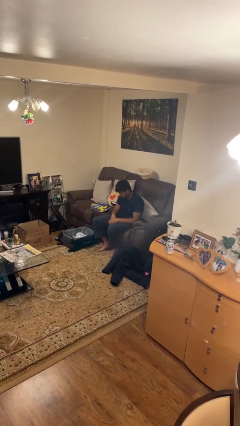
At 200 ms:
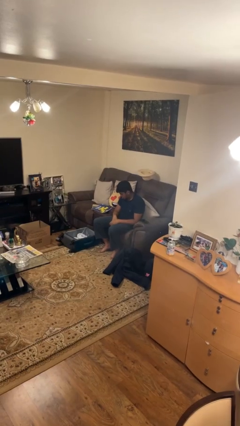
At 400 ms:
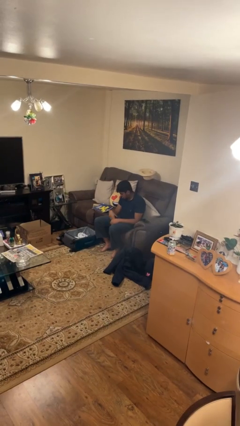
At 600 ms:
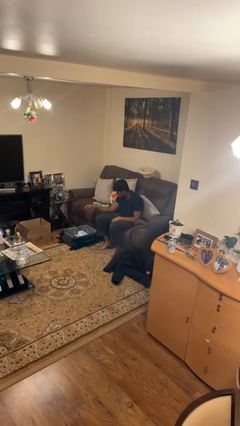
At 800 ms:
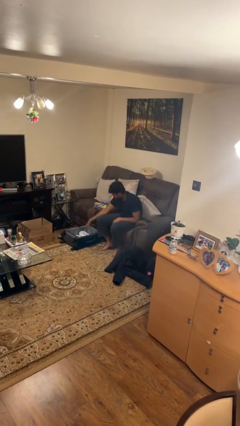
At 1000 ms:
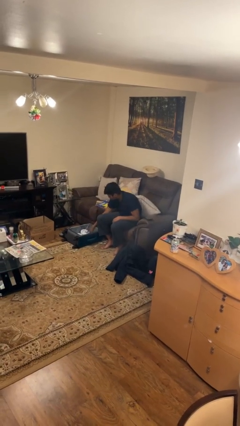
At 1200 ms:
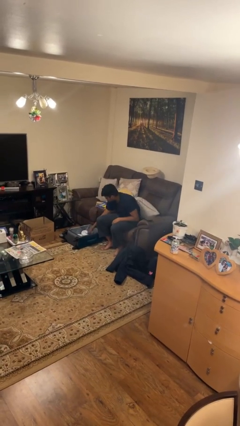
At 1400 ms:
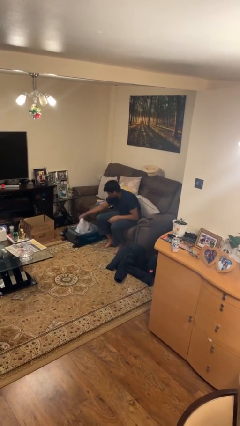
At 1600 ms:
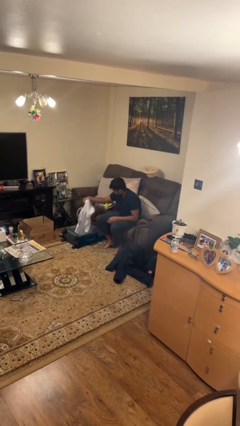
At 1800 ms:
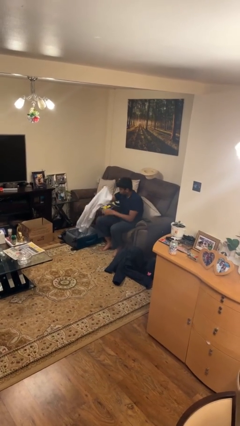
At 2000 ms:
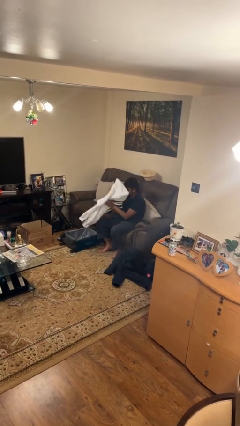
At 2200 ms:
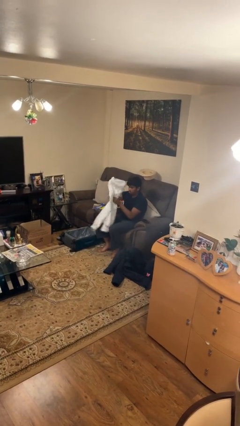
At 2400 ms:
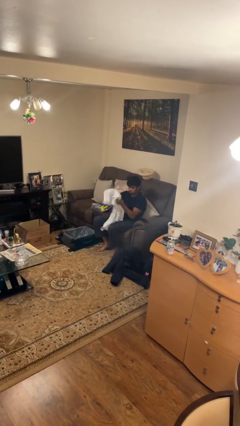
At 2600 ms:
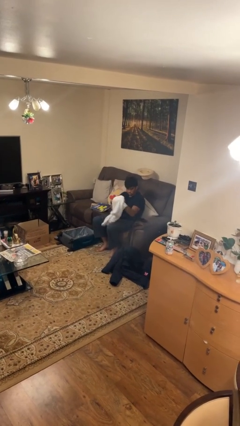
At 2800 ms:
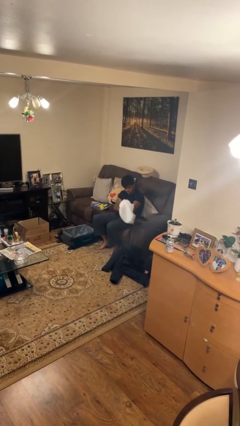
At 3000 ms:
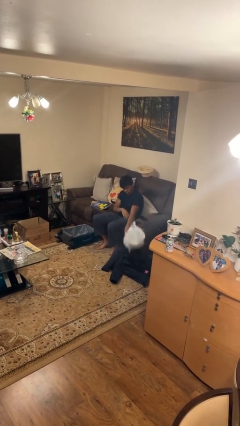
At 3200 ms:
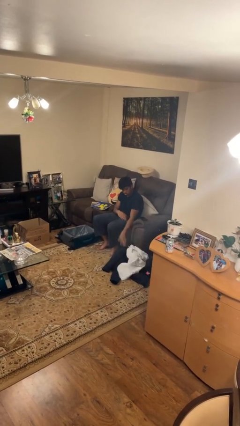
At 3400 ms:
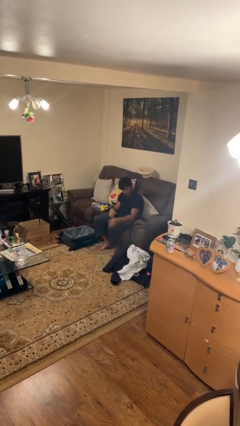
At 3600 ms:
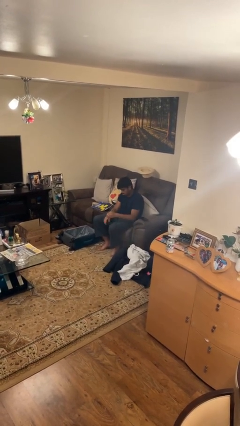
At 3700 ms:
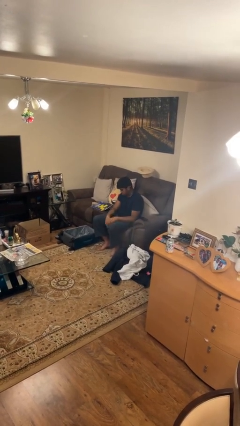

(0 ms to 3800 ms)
person unloads clothes from suitcase

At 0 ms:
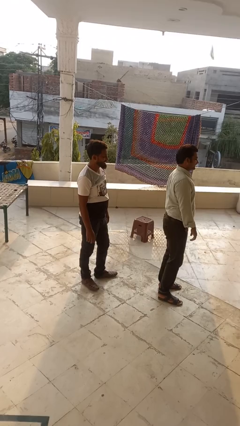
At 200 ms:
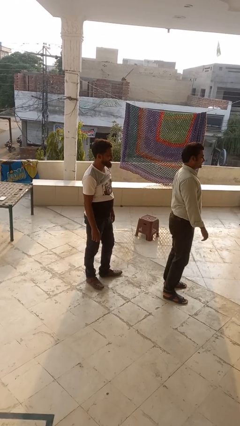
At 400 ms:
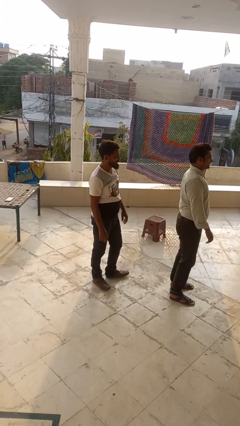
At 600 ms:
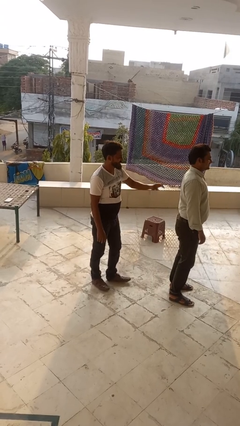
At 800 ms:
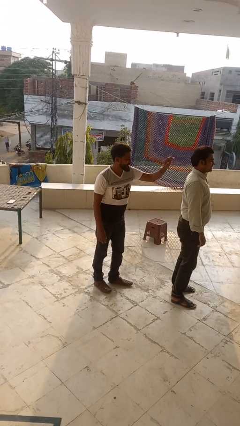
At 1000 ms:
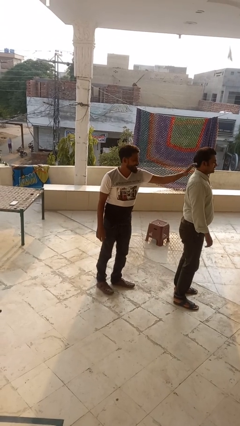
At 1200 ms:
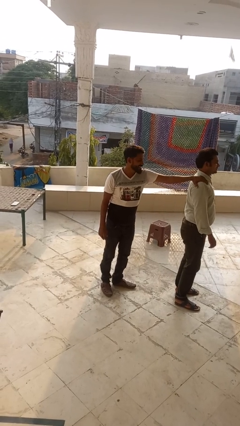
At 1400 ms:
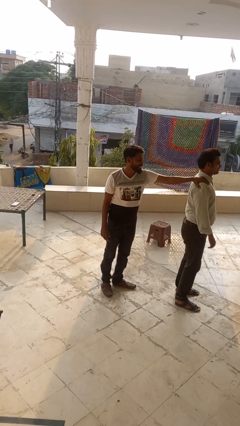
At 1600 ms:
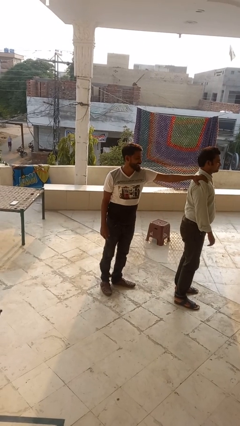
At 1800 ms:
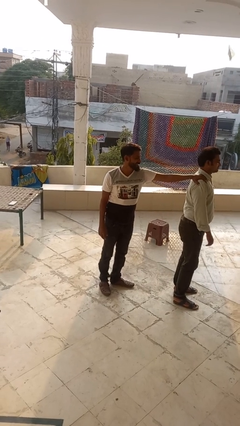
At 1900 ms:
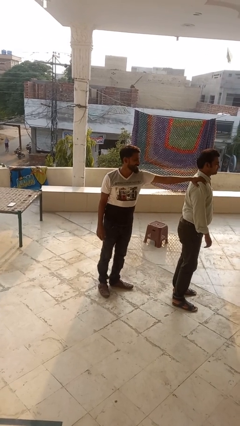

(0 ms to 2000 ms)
person grabs person by shoulder

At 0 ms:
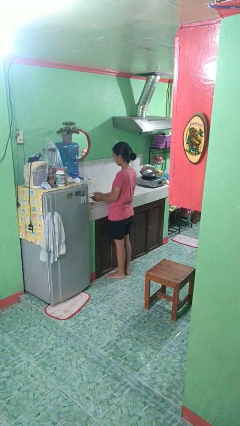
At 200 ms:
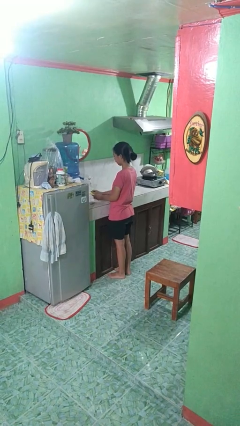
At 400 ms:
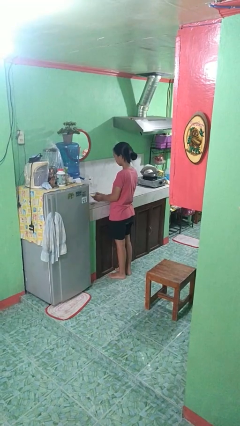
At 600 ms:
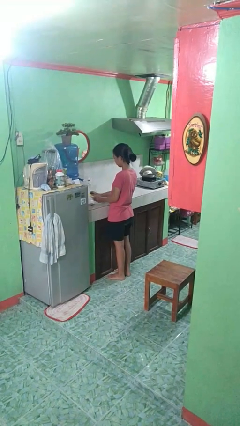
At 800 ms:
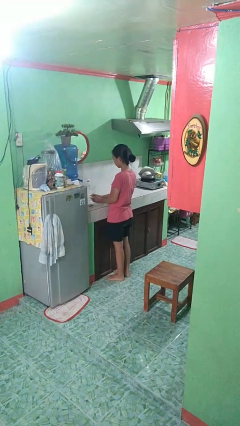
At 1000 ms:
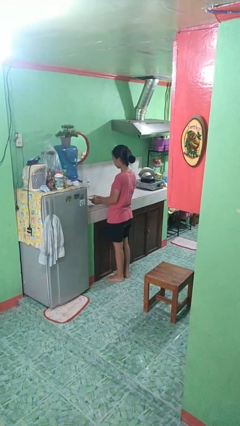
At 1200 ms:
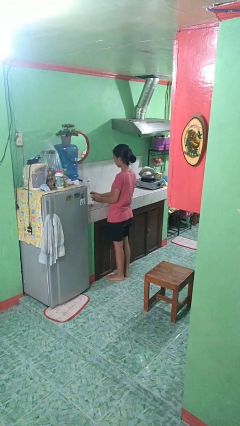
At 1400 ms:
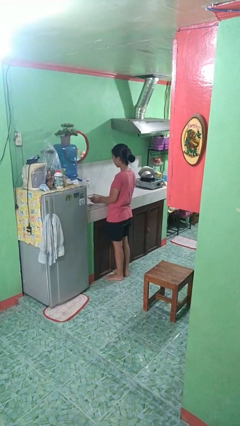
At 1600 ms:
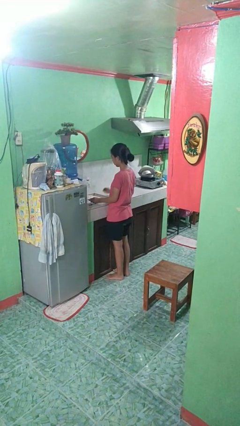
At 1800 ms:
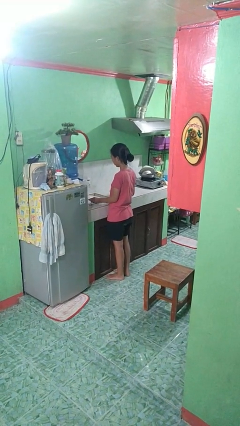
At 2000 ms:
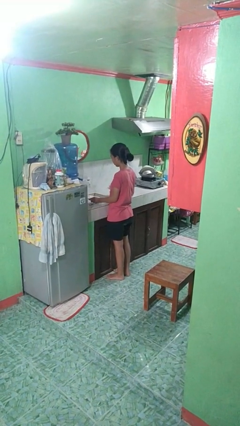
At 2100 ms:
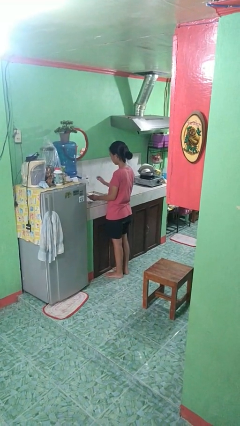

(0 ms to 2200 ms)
person washes dish

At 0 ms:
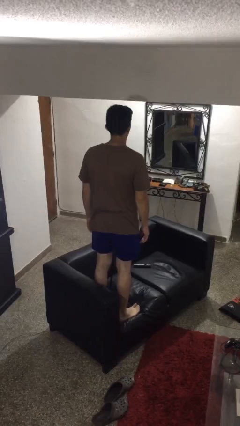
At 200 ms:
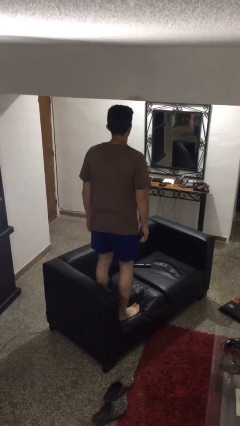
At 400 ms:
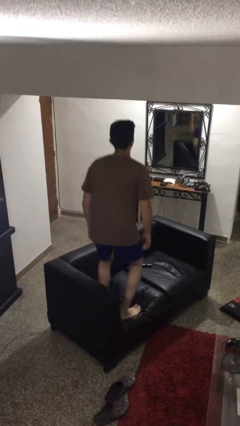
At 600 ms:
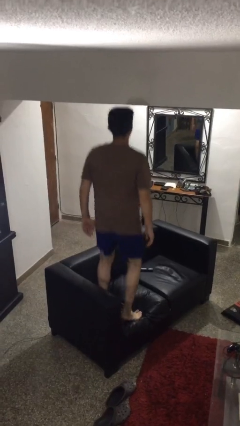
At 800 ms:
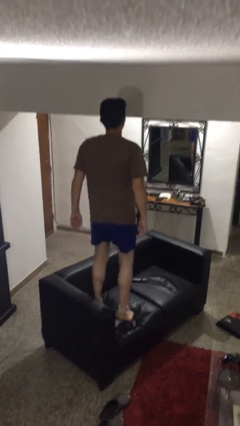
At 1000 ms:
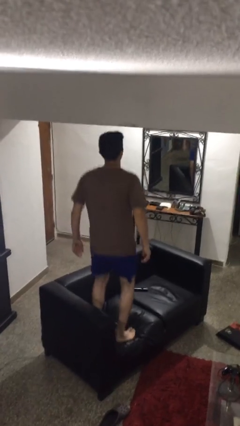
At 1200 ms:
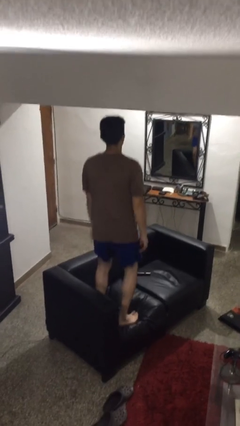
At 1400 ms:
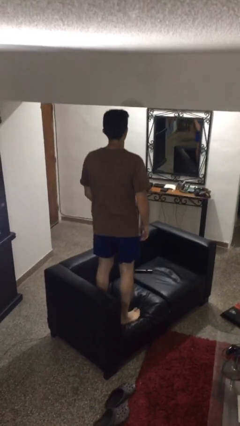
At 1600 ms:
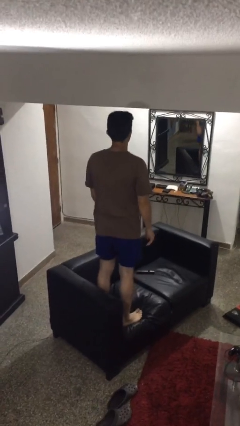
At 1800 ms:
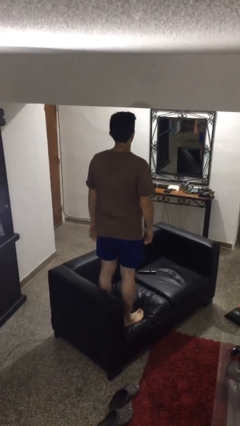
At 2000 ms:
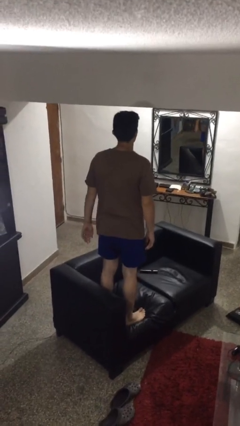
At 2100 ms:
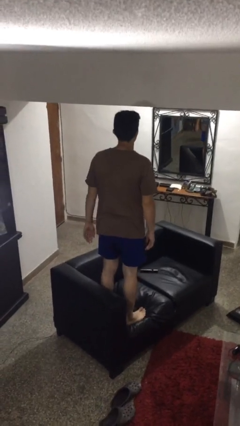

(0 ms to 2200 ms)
person jumps on couch

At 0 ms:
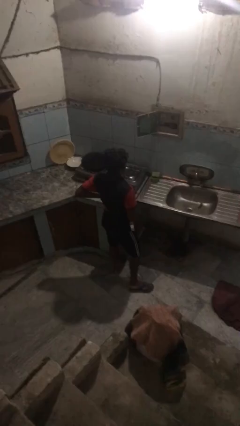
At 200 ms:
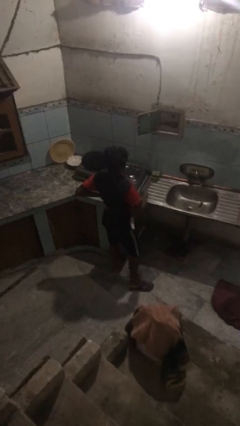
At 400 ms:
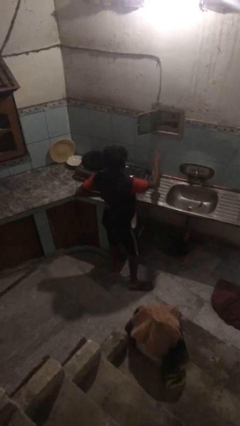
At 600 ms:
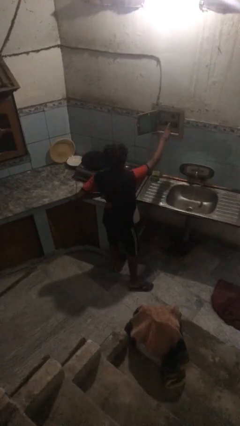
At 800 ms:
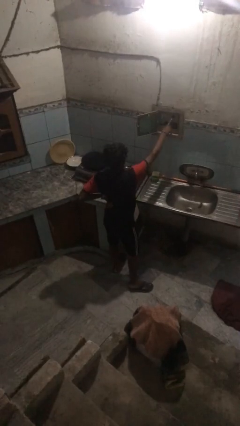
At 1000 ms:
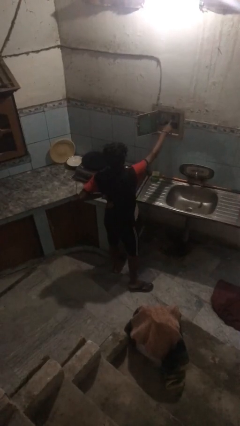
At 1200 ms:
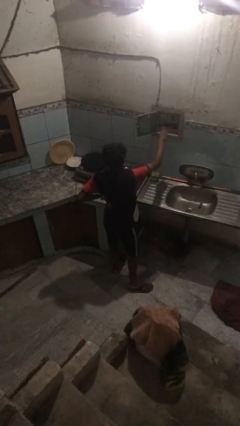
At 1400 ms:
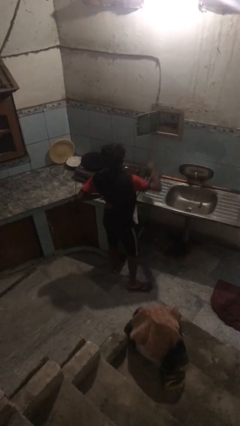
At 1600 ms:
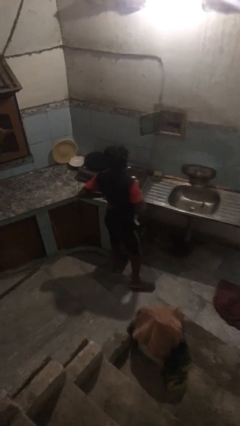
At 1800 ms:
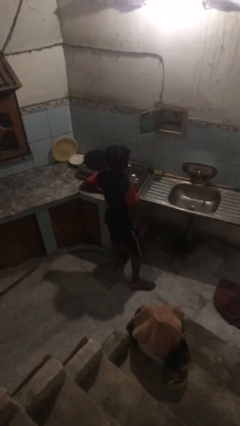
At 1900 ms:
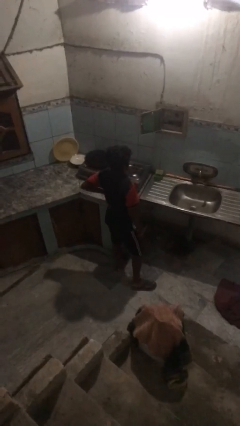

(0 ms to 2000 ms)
person takes down smoke detector

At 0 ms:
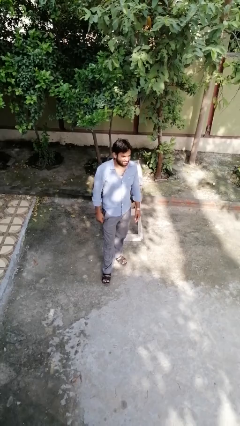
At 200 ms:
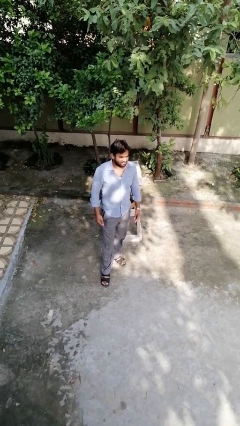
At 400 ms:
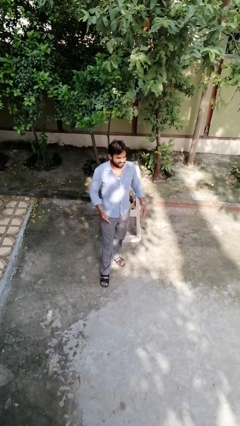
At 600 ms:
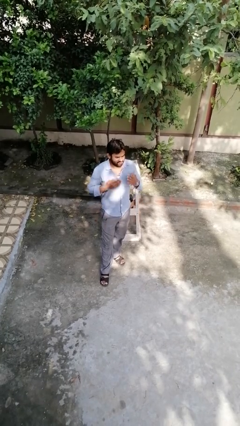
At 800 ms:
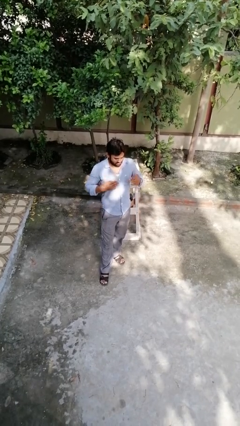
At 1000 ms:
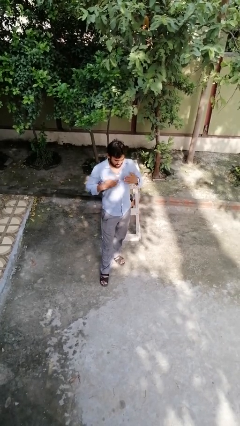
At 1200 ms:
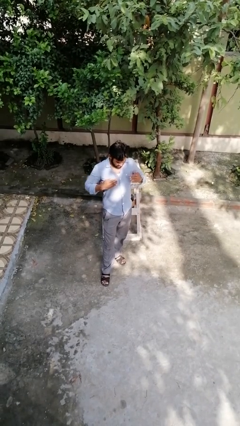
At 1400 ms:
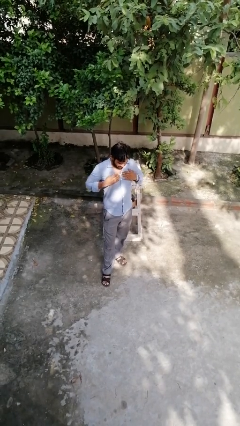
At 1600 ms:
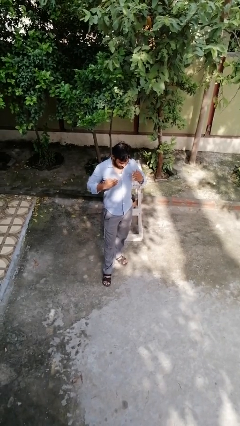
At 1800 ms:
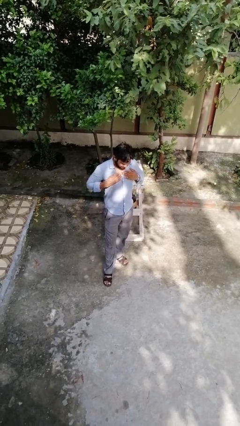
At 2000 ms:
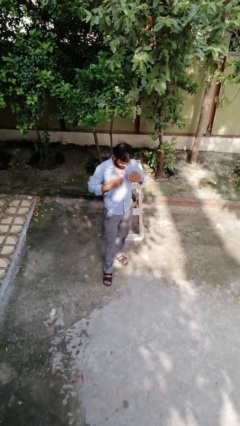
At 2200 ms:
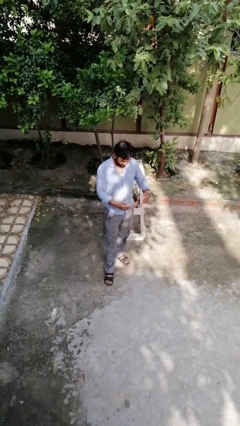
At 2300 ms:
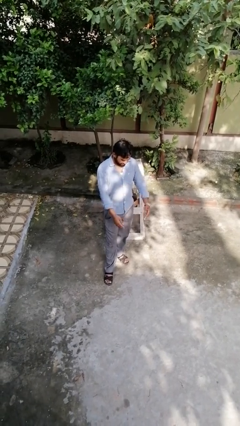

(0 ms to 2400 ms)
person drums on chest

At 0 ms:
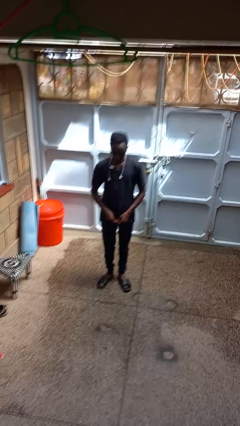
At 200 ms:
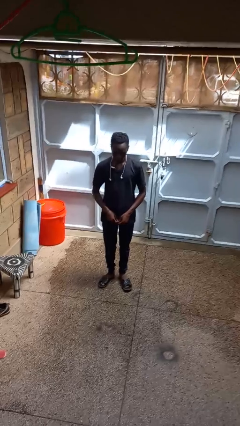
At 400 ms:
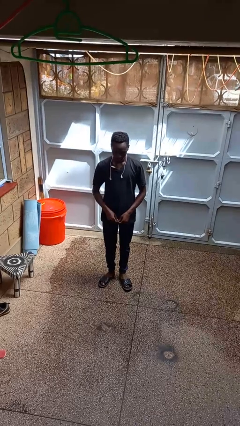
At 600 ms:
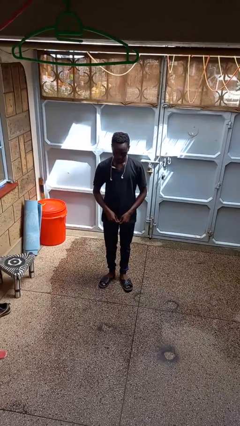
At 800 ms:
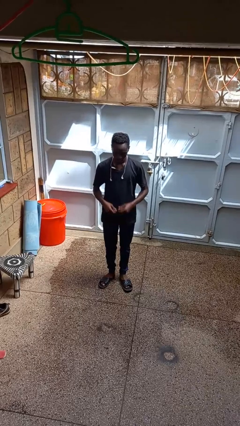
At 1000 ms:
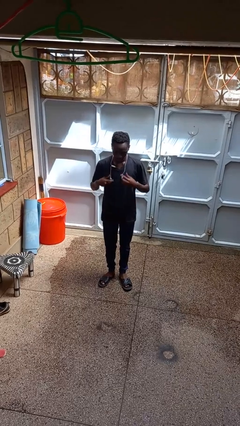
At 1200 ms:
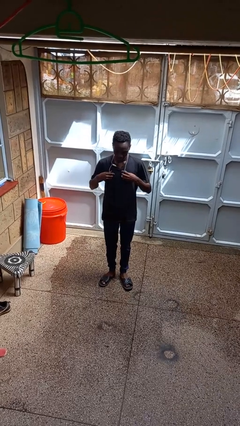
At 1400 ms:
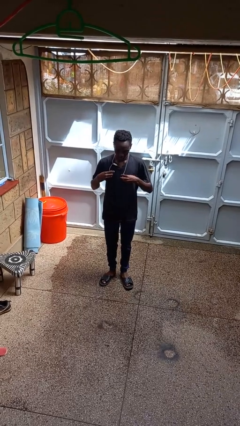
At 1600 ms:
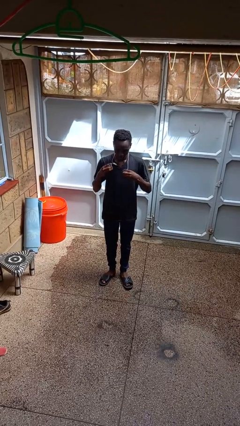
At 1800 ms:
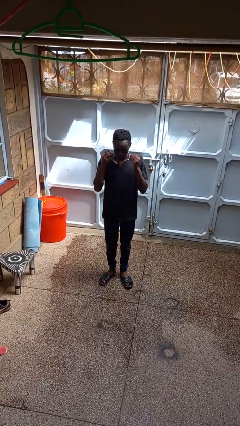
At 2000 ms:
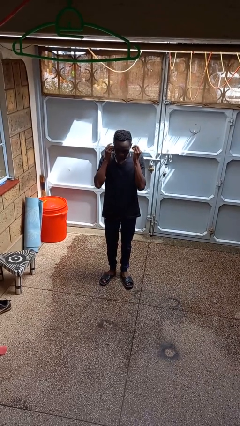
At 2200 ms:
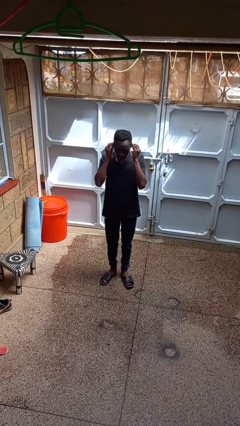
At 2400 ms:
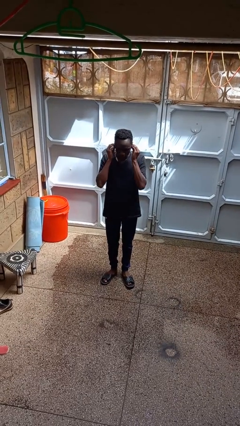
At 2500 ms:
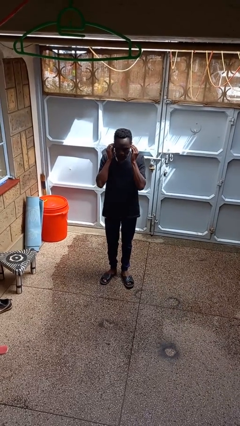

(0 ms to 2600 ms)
person puts on headphones
